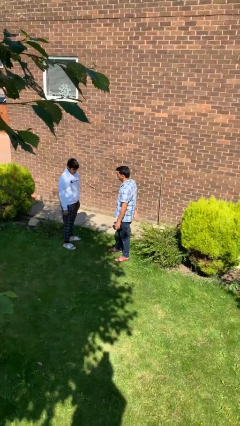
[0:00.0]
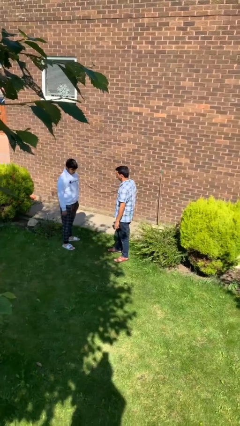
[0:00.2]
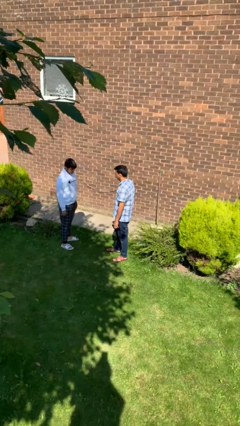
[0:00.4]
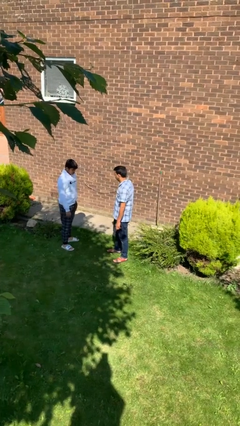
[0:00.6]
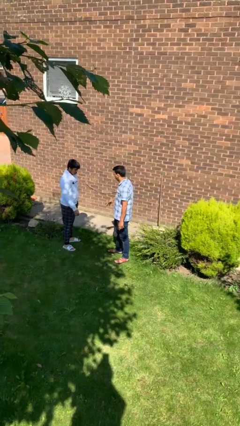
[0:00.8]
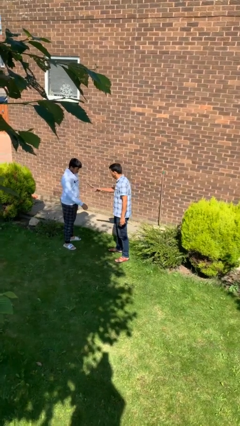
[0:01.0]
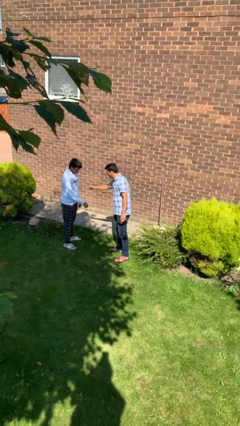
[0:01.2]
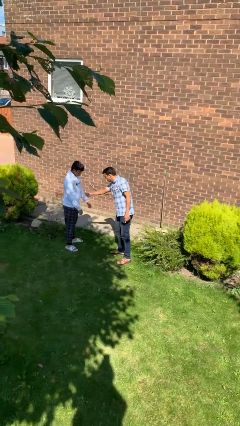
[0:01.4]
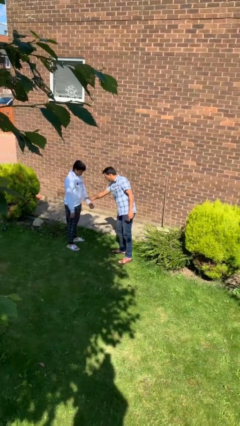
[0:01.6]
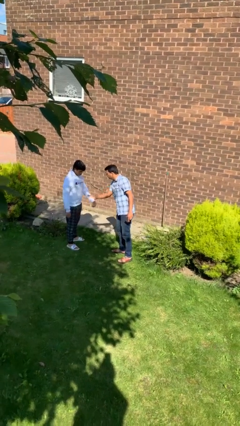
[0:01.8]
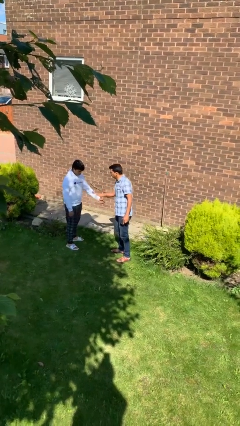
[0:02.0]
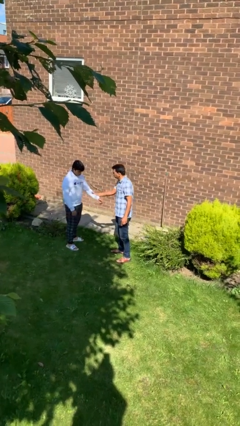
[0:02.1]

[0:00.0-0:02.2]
person grabs person by forearm

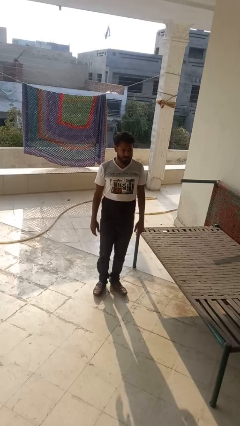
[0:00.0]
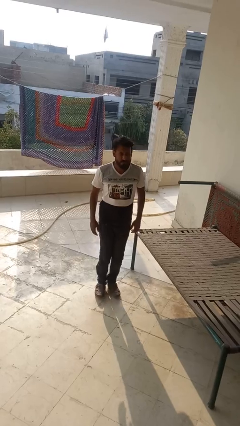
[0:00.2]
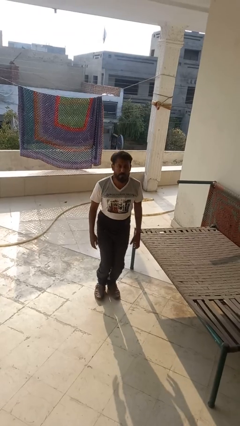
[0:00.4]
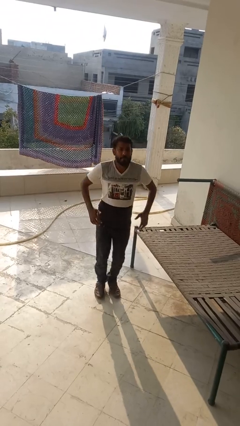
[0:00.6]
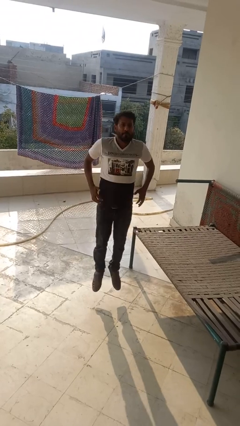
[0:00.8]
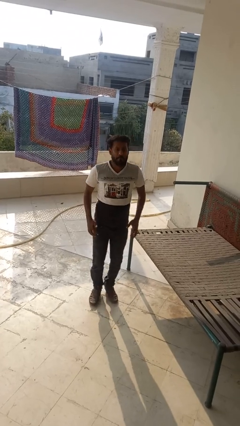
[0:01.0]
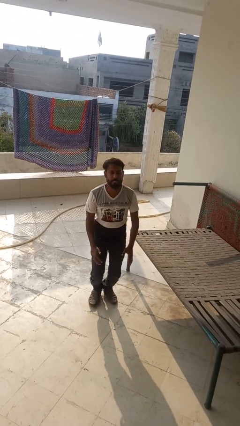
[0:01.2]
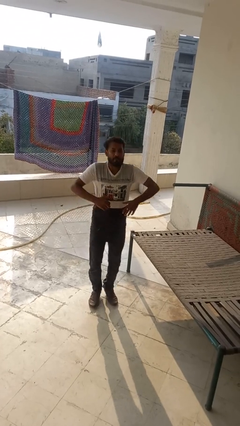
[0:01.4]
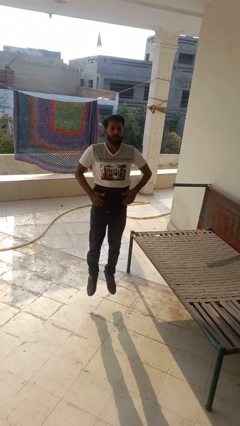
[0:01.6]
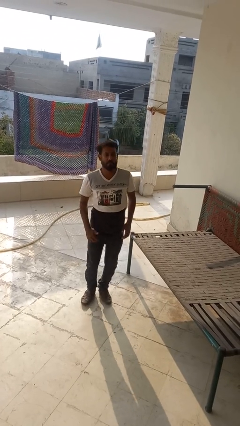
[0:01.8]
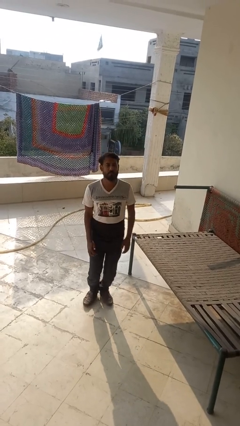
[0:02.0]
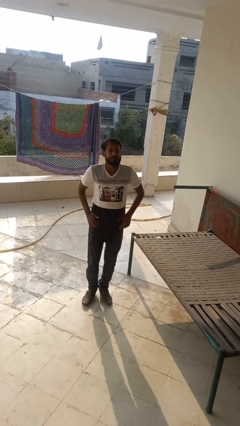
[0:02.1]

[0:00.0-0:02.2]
person jumps

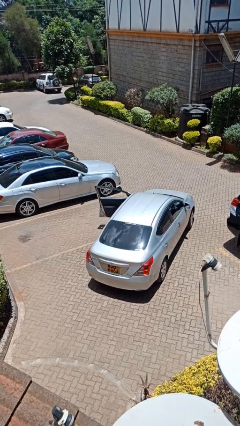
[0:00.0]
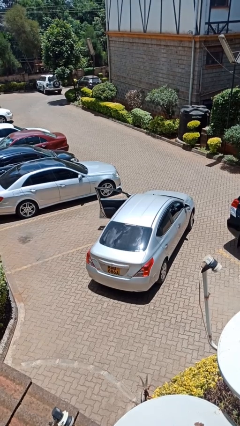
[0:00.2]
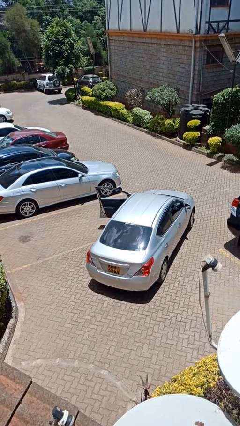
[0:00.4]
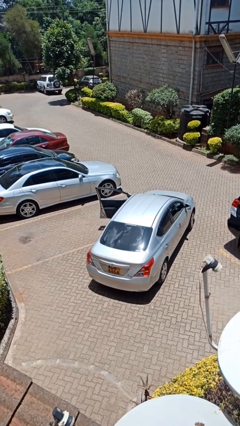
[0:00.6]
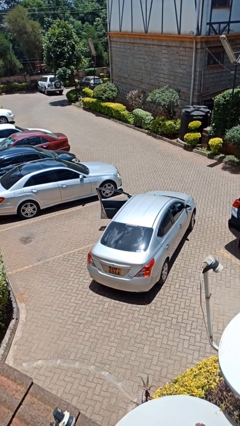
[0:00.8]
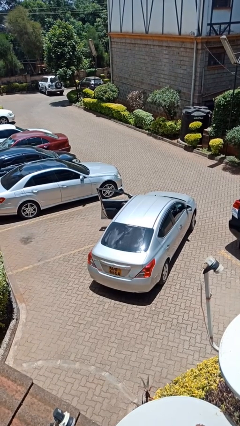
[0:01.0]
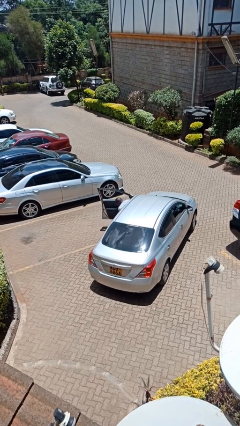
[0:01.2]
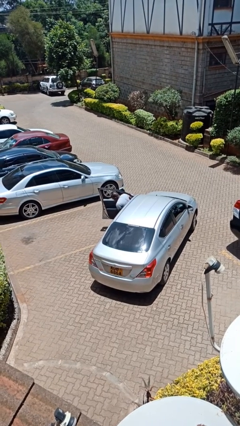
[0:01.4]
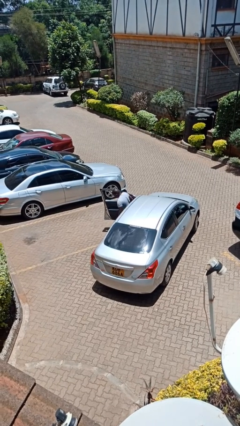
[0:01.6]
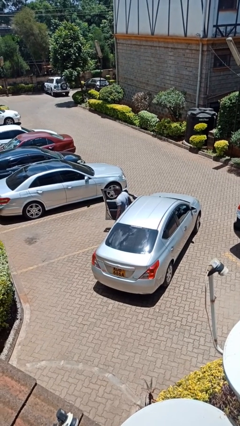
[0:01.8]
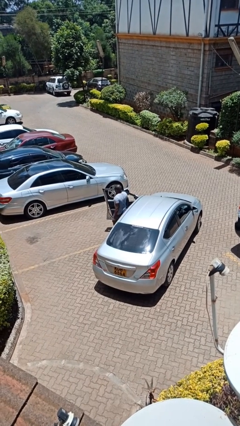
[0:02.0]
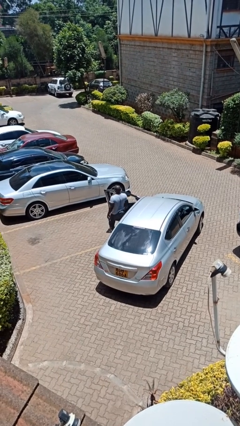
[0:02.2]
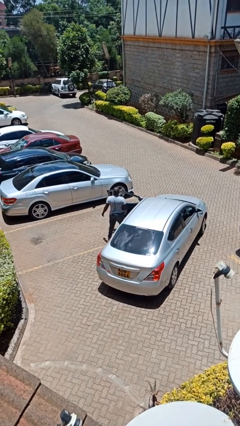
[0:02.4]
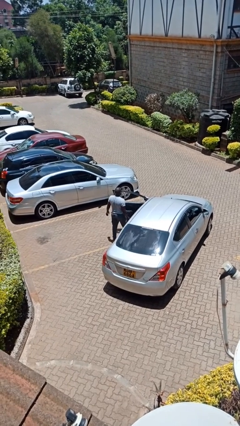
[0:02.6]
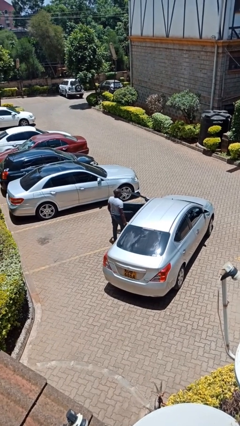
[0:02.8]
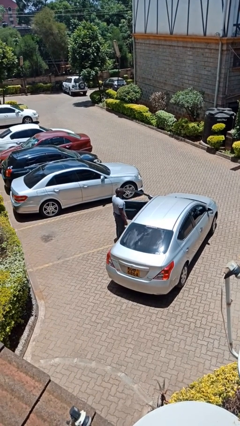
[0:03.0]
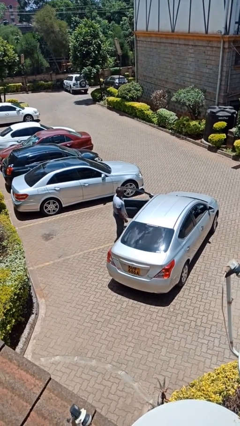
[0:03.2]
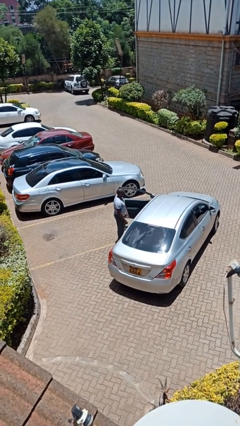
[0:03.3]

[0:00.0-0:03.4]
person exits car

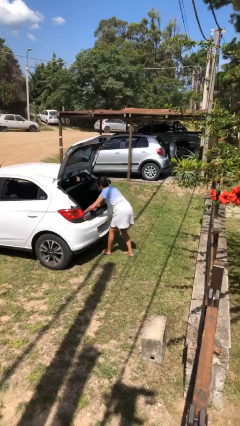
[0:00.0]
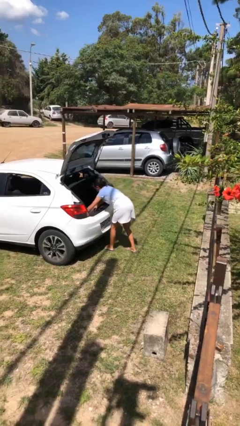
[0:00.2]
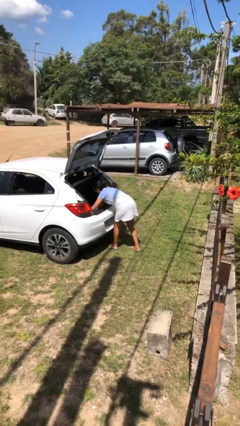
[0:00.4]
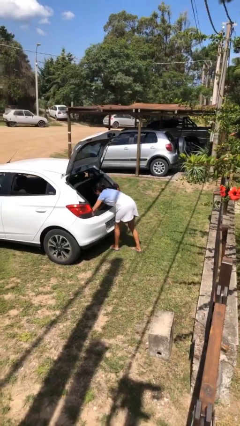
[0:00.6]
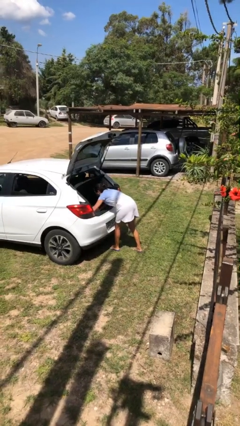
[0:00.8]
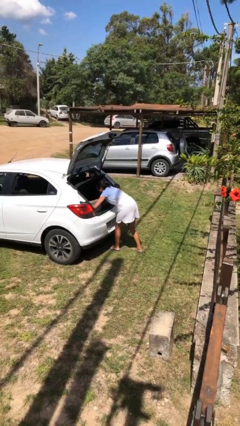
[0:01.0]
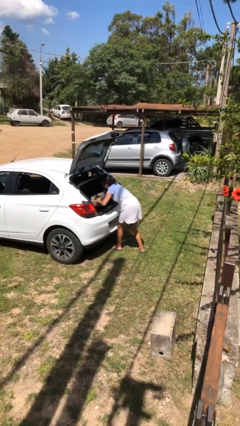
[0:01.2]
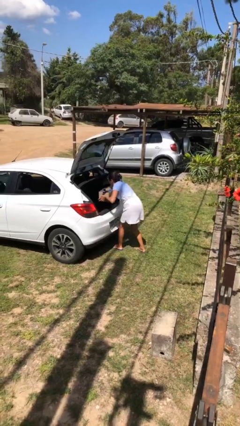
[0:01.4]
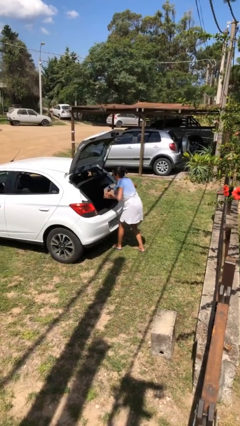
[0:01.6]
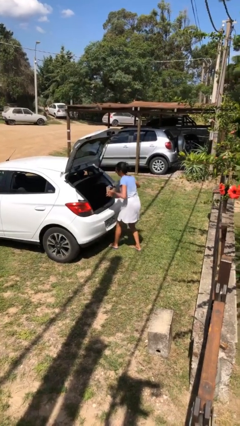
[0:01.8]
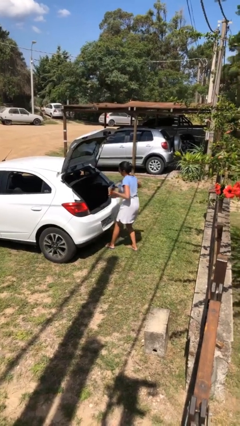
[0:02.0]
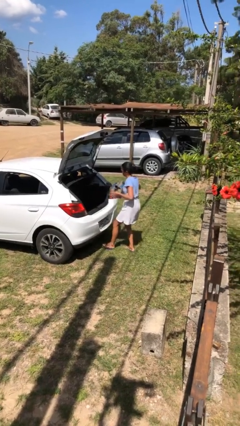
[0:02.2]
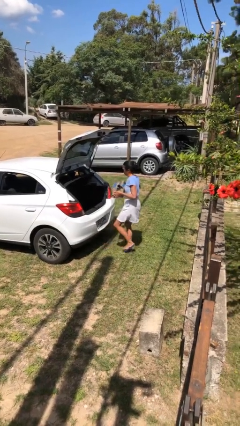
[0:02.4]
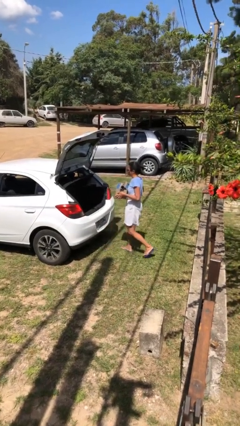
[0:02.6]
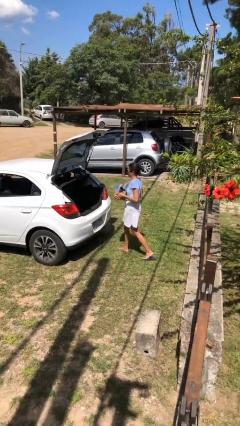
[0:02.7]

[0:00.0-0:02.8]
person unloads car

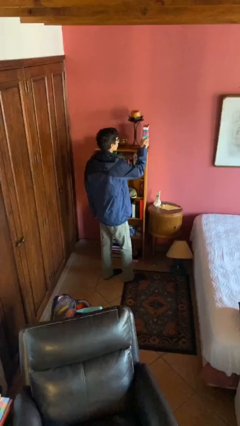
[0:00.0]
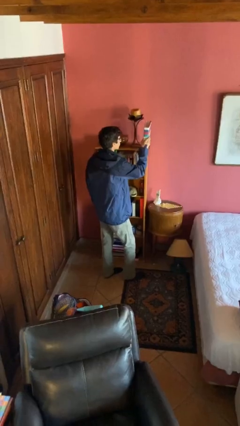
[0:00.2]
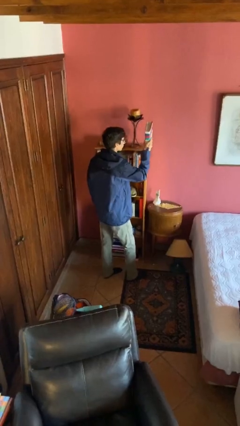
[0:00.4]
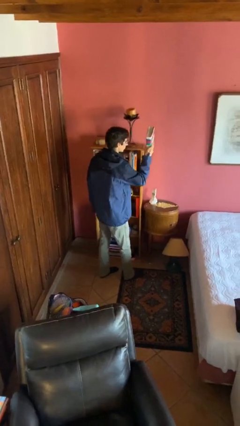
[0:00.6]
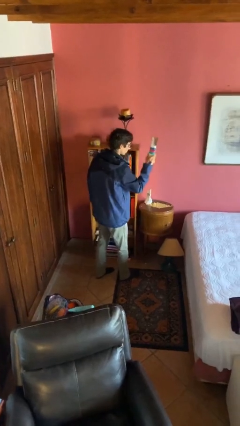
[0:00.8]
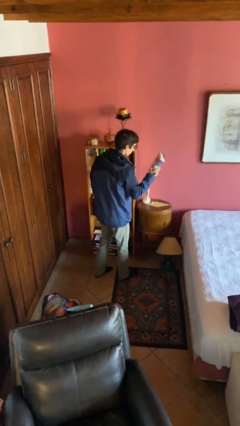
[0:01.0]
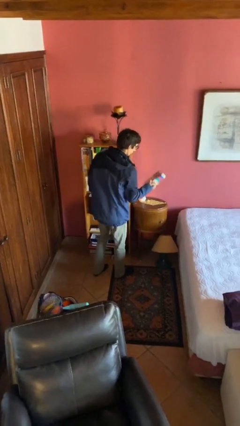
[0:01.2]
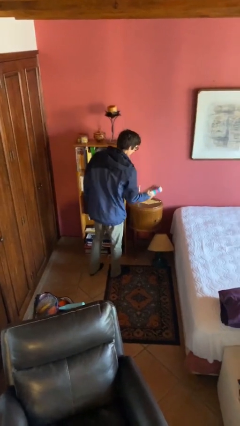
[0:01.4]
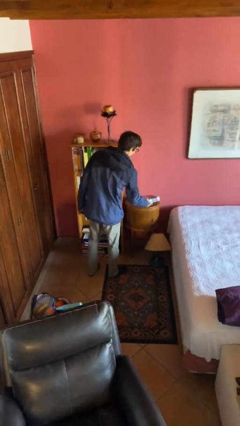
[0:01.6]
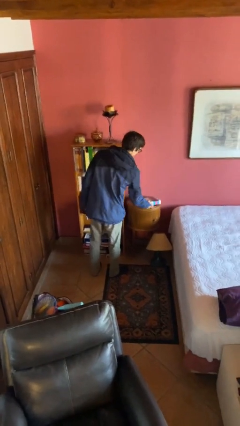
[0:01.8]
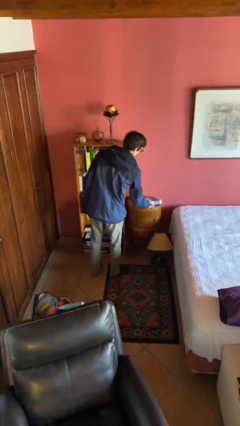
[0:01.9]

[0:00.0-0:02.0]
person picks up object from shelf

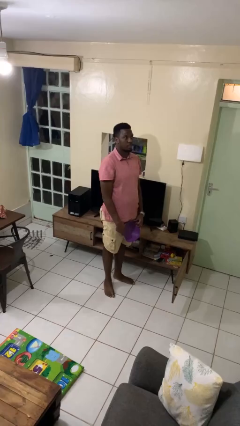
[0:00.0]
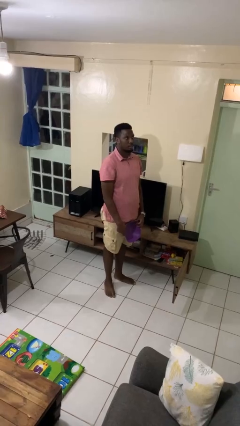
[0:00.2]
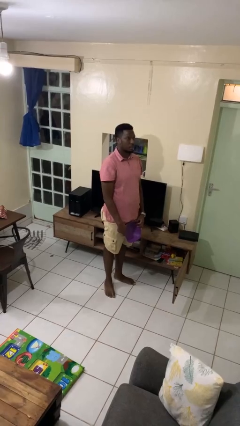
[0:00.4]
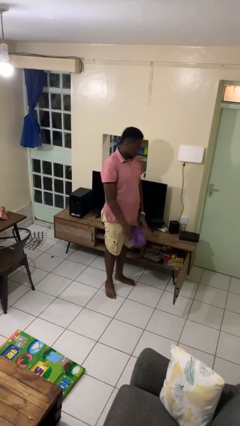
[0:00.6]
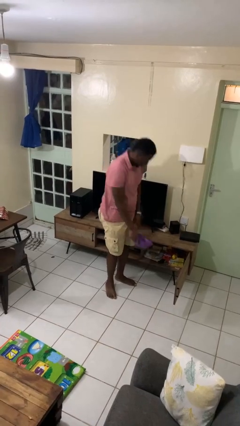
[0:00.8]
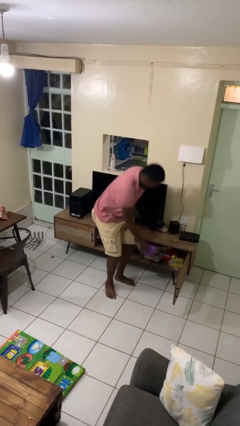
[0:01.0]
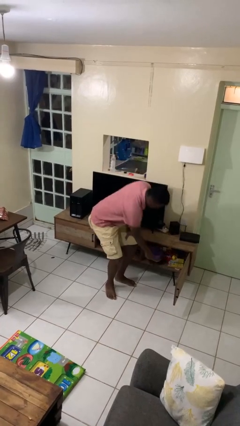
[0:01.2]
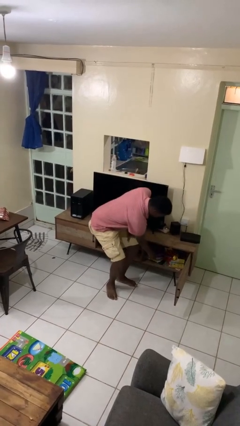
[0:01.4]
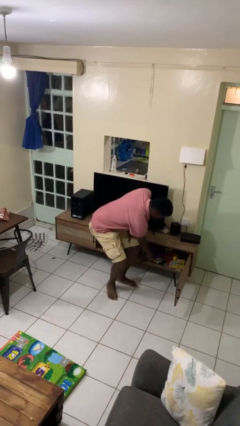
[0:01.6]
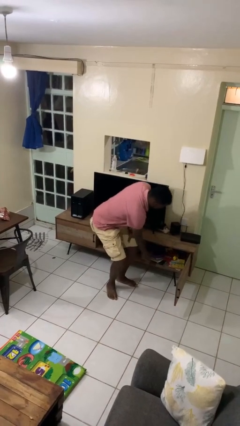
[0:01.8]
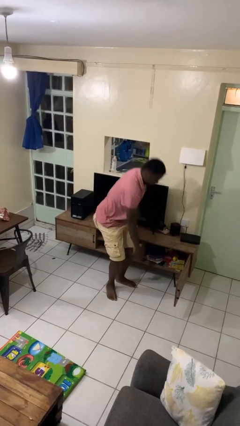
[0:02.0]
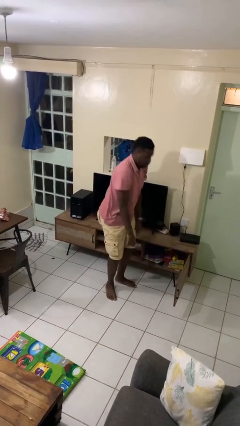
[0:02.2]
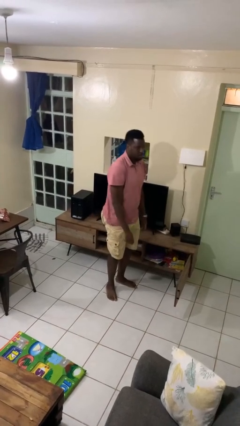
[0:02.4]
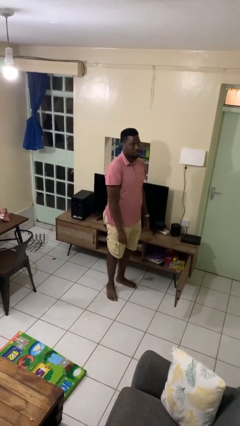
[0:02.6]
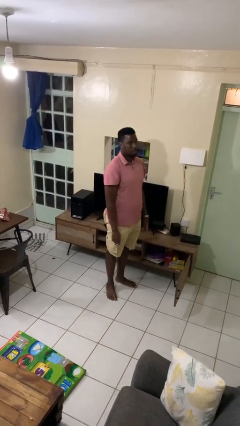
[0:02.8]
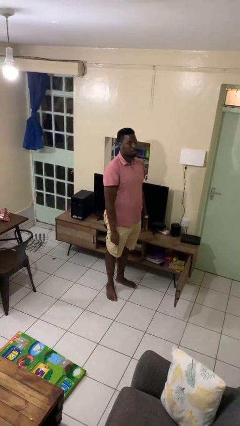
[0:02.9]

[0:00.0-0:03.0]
person puts down object into cabinet

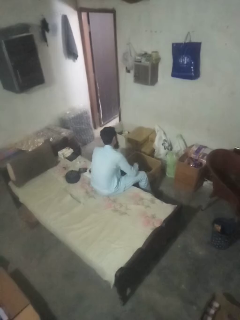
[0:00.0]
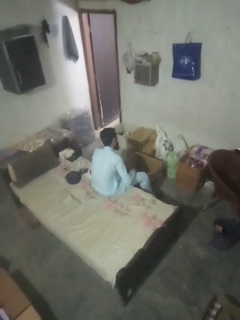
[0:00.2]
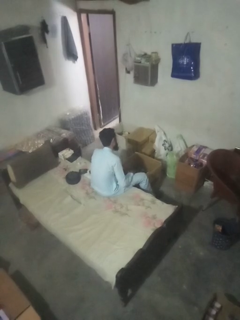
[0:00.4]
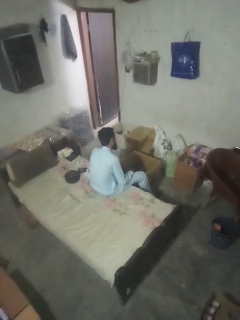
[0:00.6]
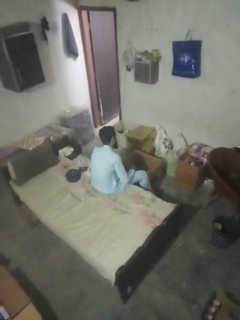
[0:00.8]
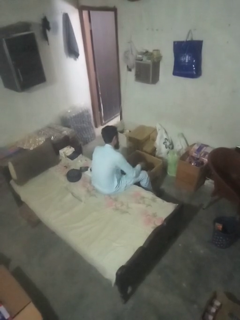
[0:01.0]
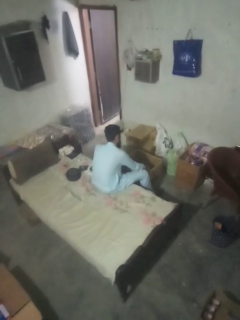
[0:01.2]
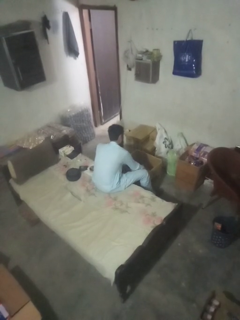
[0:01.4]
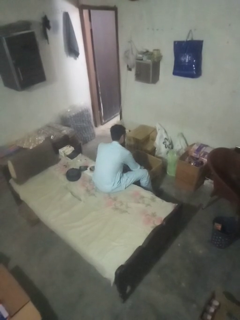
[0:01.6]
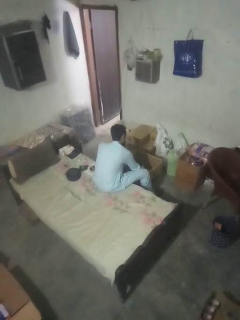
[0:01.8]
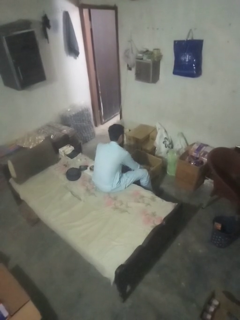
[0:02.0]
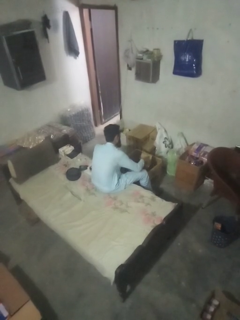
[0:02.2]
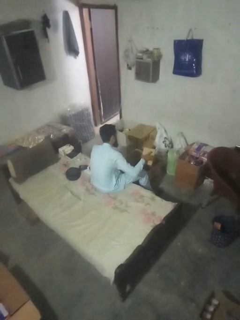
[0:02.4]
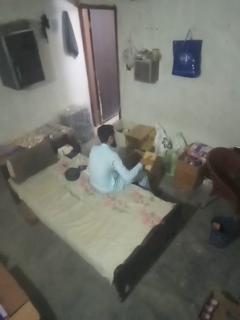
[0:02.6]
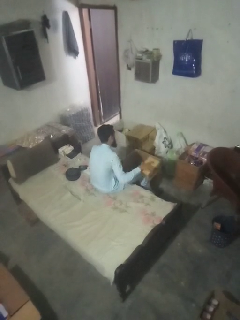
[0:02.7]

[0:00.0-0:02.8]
person takes object from box
